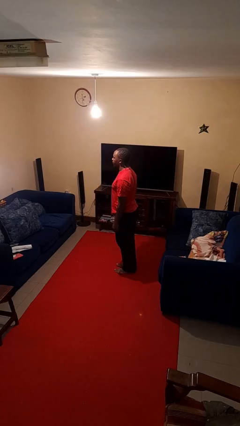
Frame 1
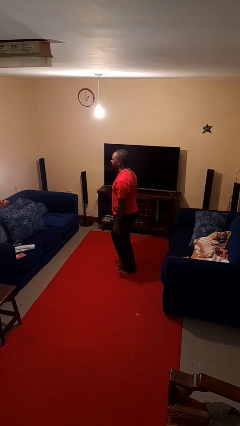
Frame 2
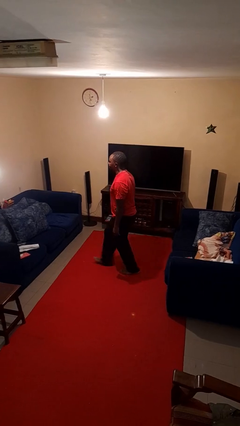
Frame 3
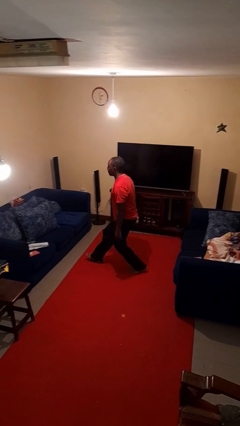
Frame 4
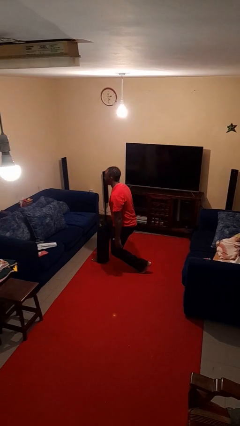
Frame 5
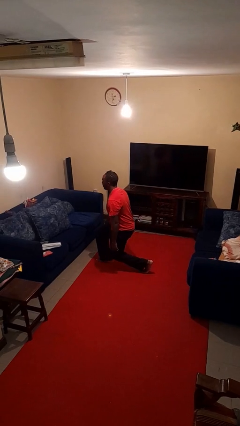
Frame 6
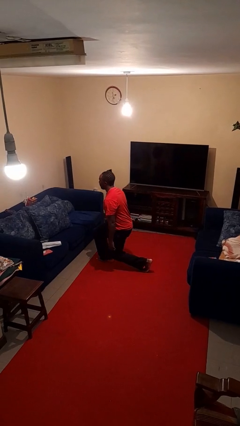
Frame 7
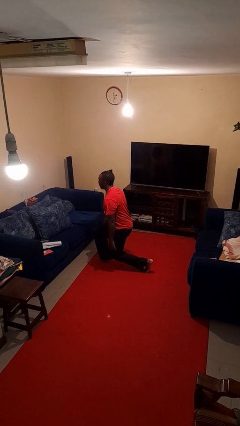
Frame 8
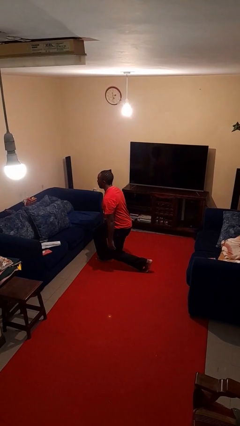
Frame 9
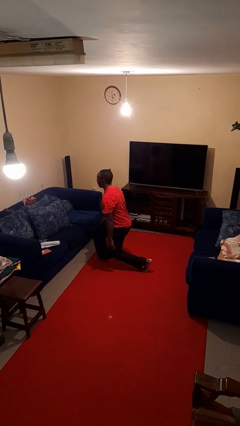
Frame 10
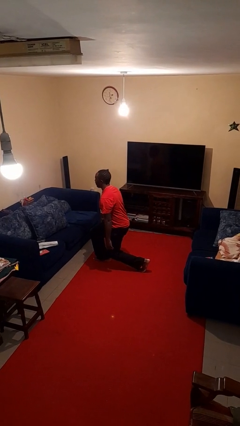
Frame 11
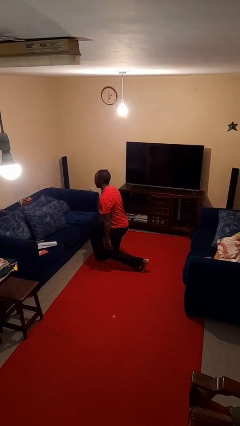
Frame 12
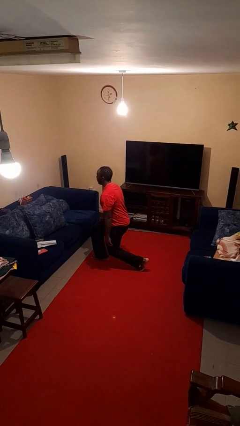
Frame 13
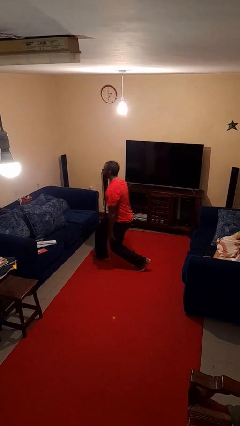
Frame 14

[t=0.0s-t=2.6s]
person exercises with lunges

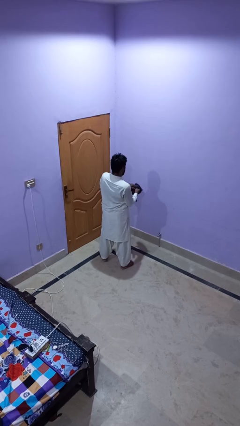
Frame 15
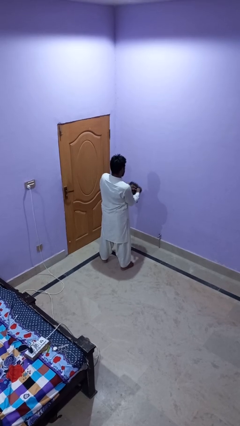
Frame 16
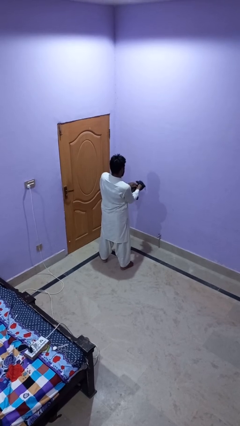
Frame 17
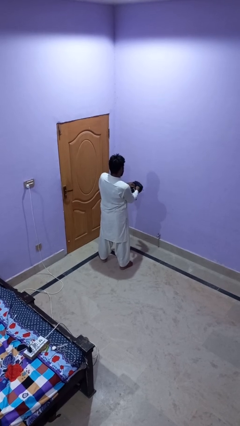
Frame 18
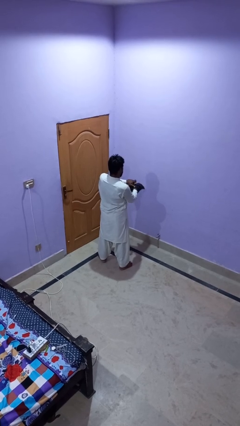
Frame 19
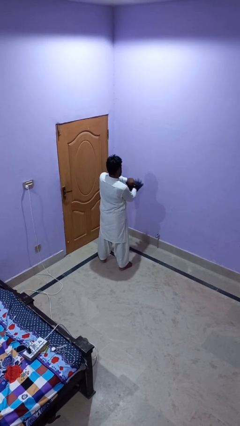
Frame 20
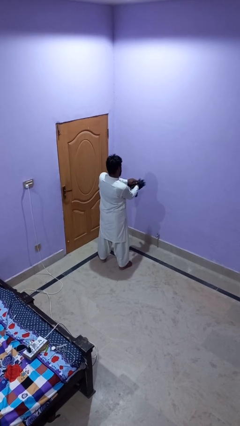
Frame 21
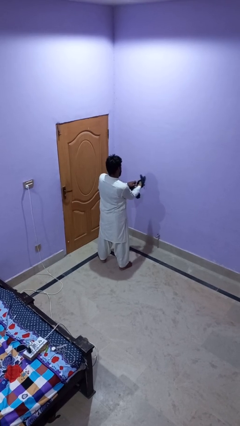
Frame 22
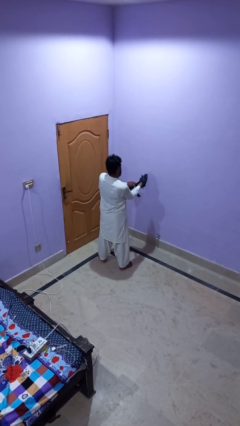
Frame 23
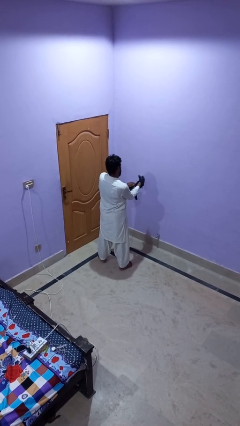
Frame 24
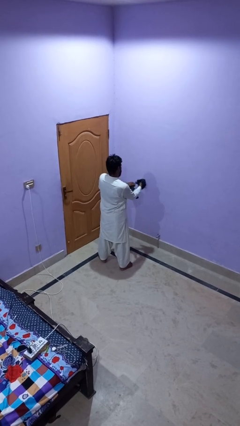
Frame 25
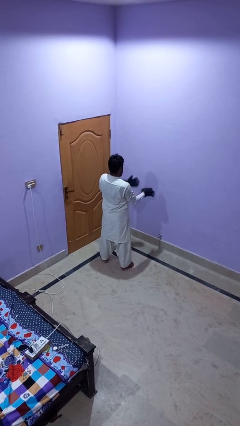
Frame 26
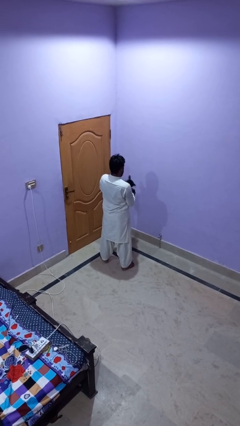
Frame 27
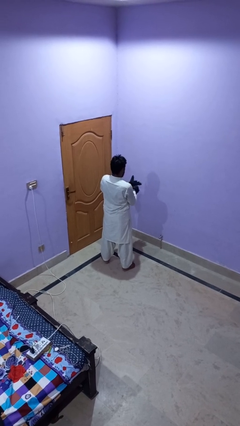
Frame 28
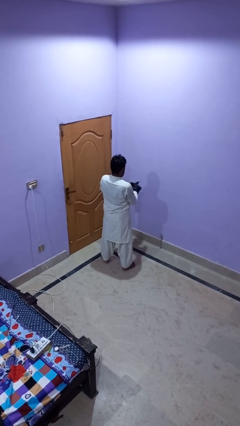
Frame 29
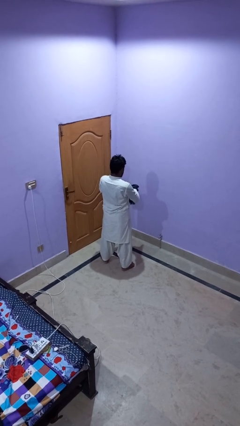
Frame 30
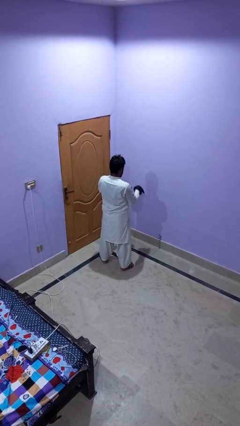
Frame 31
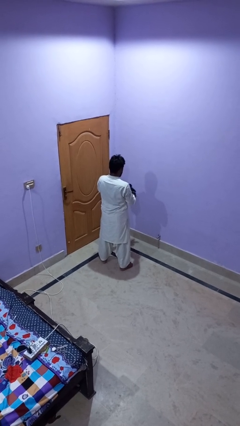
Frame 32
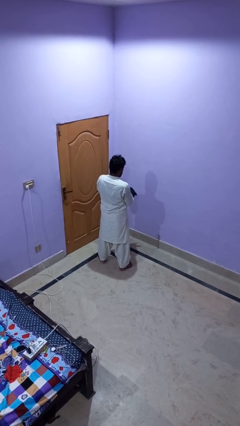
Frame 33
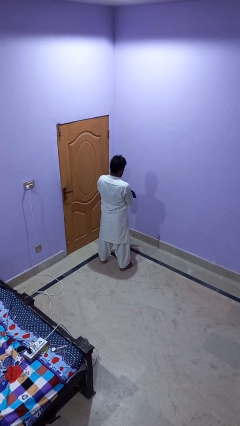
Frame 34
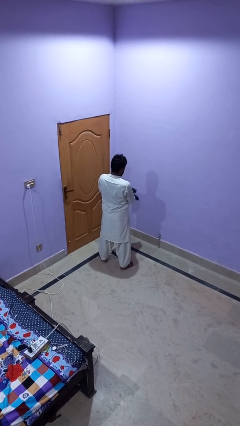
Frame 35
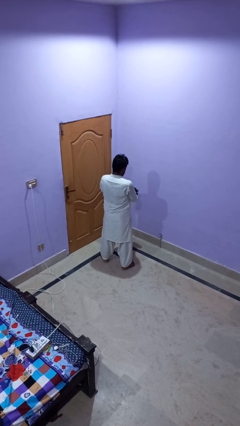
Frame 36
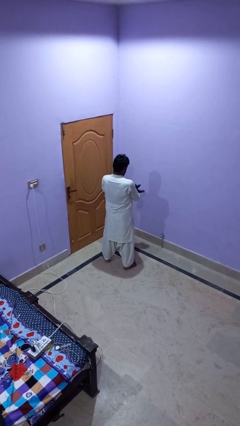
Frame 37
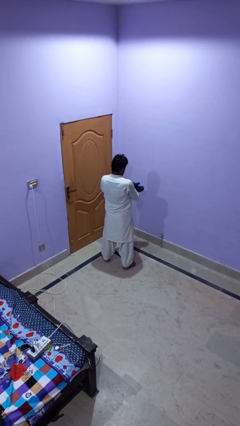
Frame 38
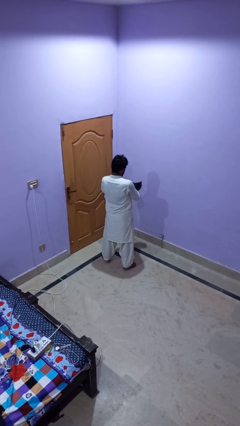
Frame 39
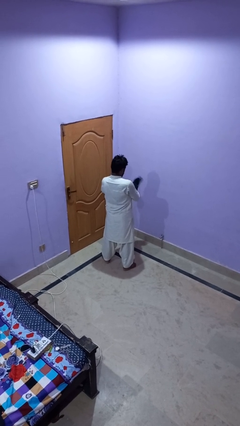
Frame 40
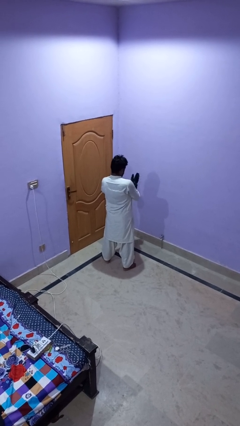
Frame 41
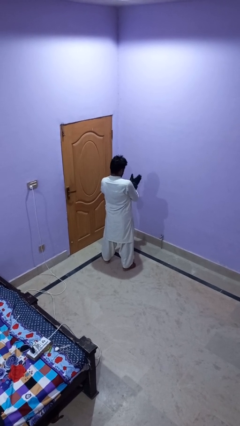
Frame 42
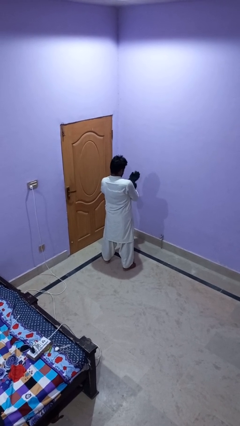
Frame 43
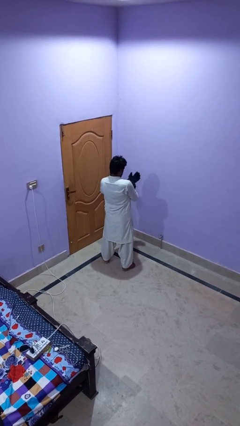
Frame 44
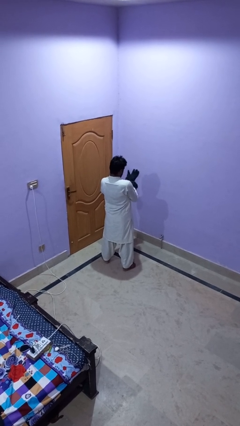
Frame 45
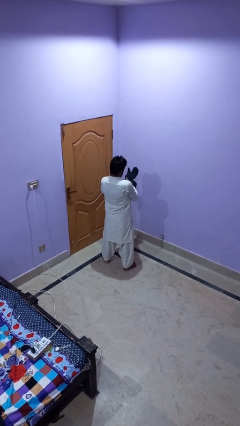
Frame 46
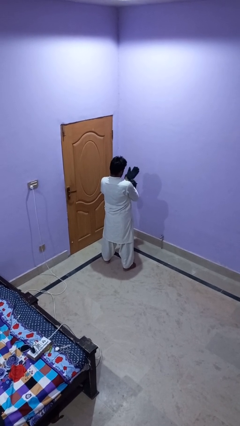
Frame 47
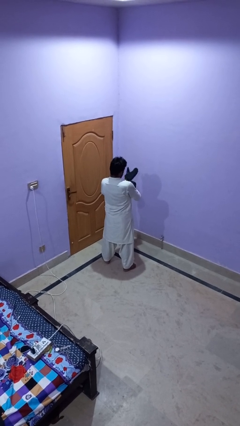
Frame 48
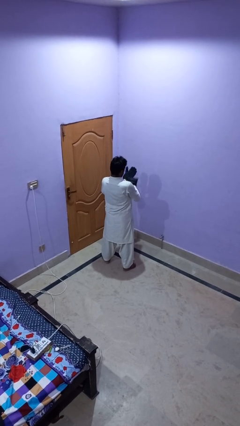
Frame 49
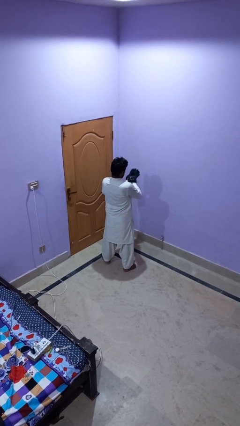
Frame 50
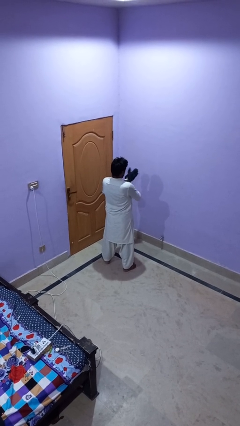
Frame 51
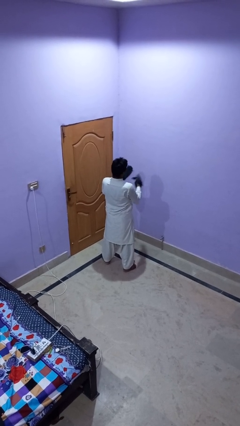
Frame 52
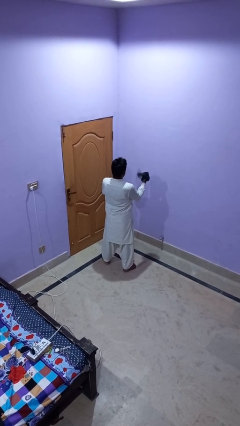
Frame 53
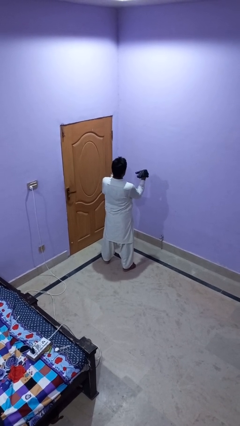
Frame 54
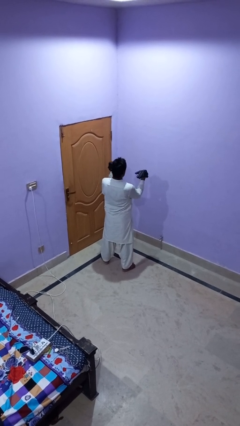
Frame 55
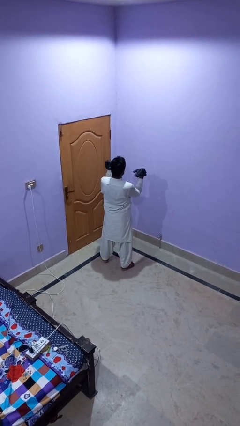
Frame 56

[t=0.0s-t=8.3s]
person puts on gloves

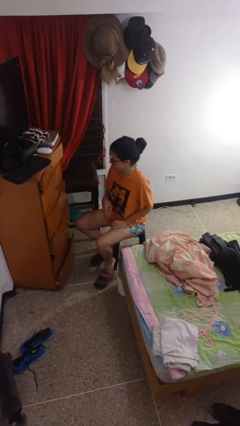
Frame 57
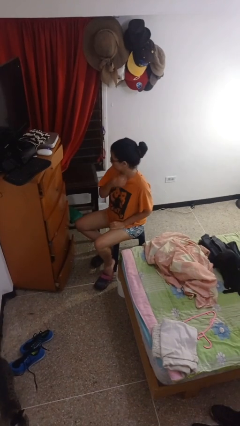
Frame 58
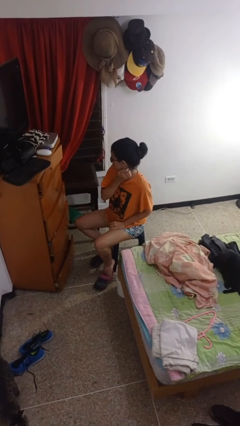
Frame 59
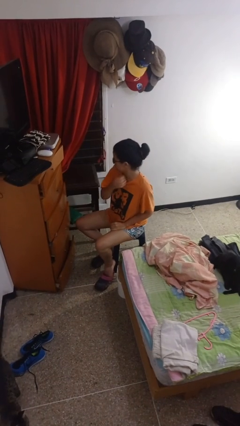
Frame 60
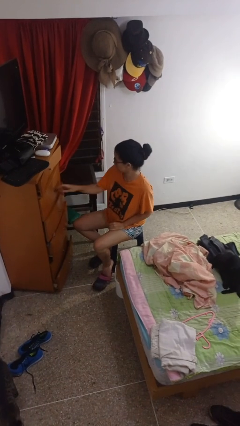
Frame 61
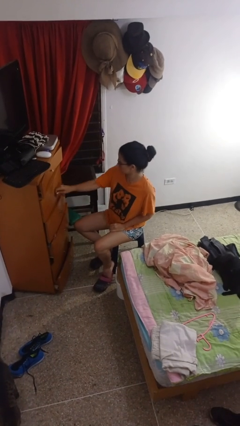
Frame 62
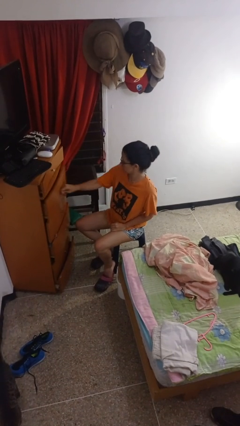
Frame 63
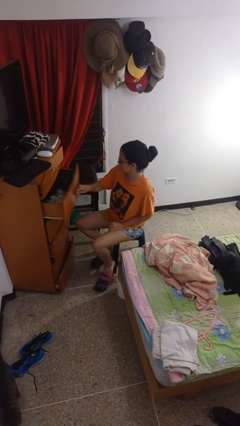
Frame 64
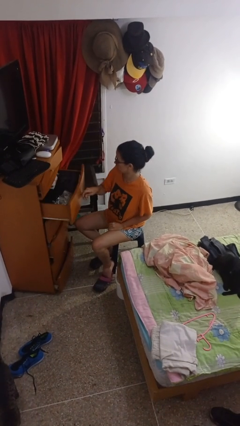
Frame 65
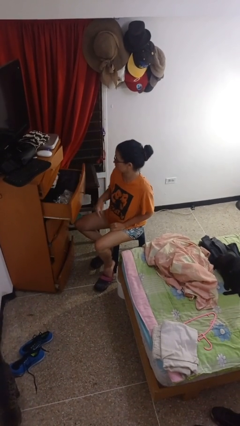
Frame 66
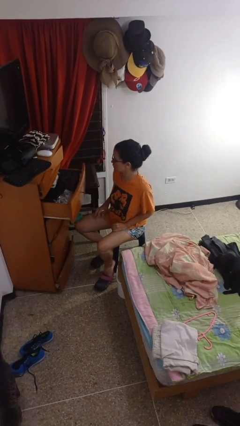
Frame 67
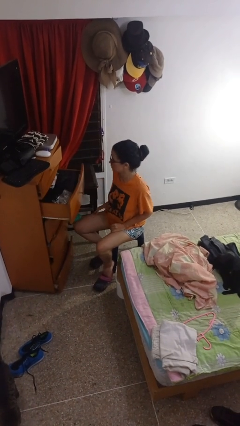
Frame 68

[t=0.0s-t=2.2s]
person opens dresser drawer

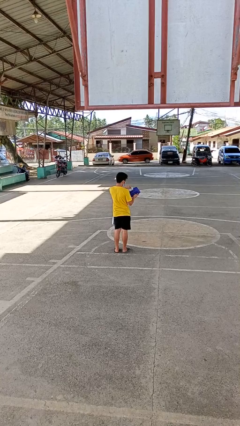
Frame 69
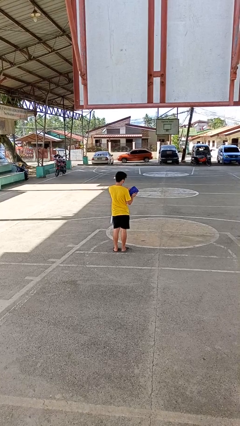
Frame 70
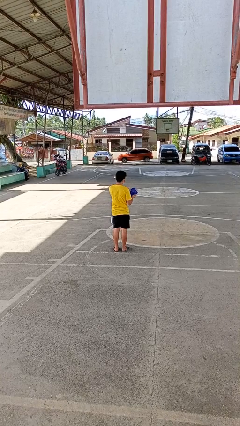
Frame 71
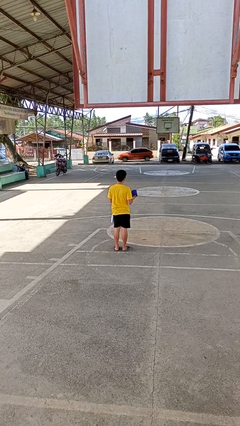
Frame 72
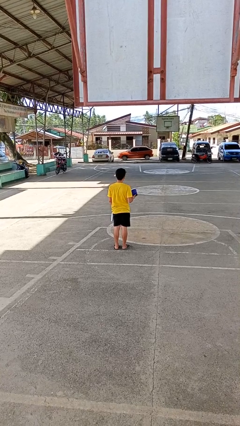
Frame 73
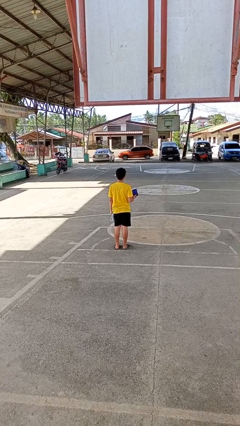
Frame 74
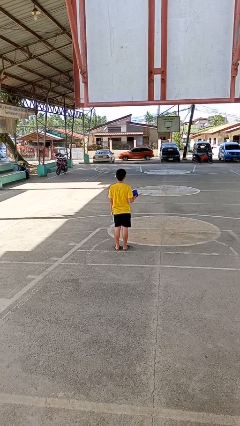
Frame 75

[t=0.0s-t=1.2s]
person puts object into purse

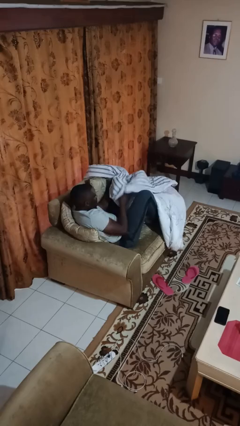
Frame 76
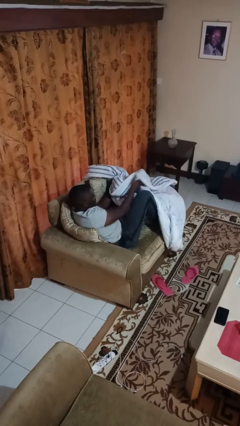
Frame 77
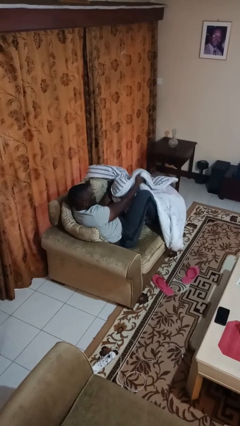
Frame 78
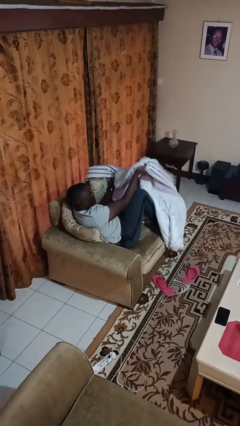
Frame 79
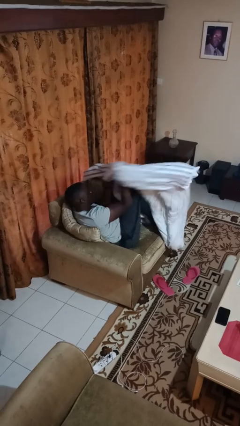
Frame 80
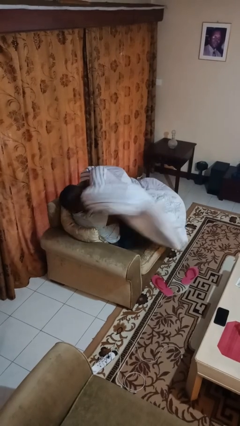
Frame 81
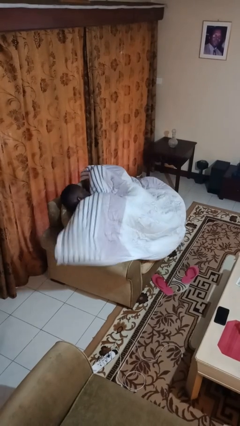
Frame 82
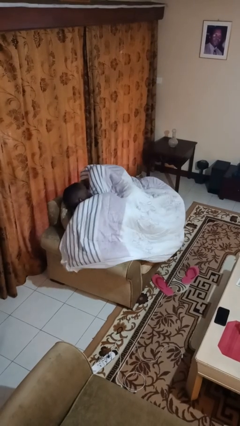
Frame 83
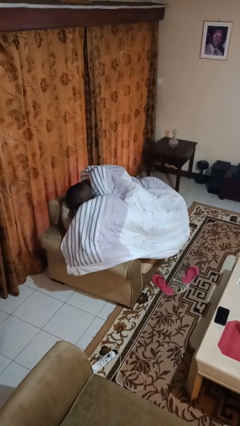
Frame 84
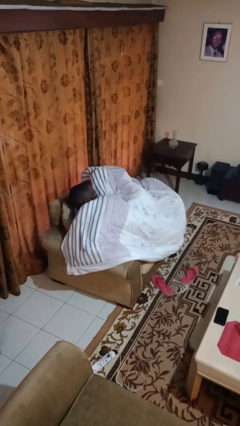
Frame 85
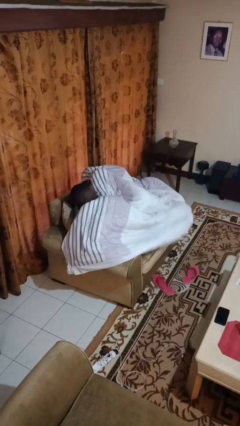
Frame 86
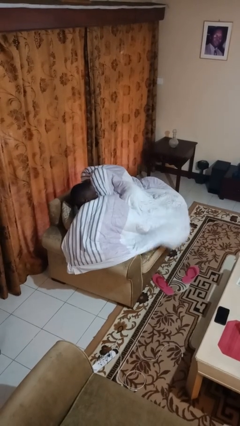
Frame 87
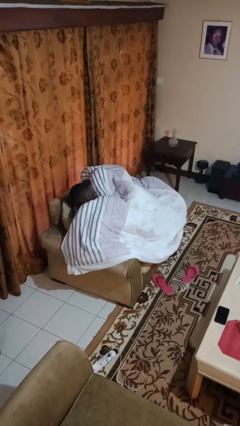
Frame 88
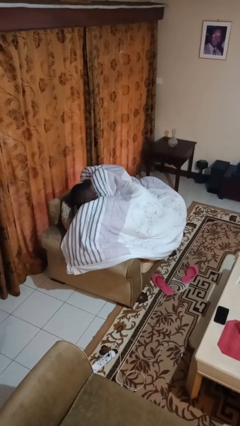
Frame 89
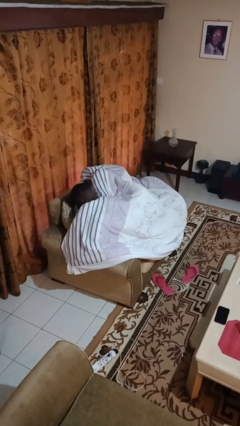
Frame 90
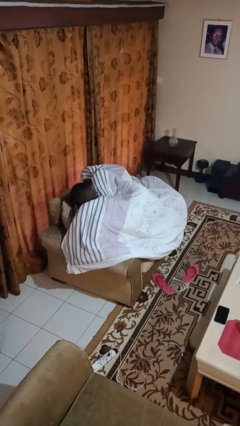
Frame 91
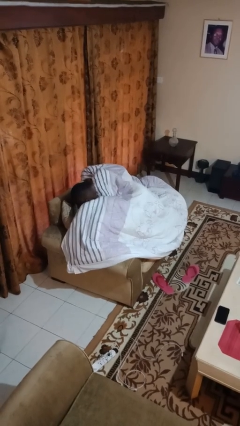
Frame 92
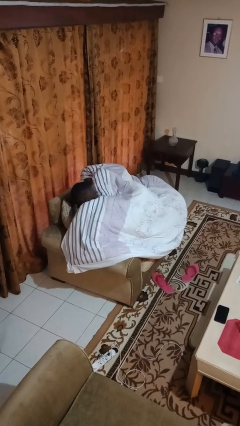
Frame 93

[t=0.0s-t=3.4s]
person covers with blanket

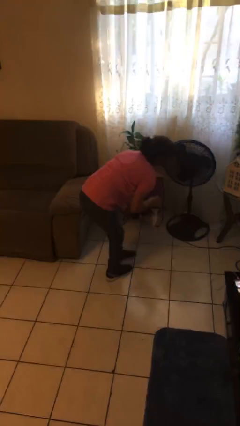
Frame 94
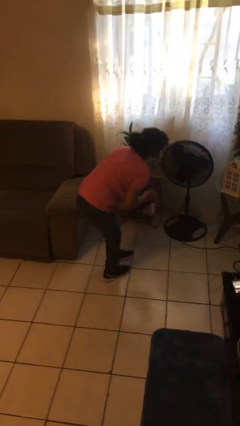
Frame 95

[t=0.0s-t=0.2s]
person picks up object from floor
